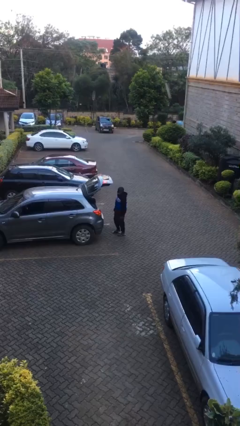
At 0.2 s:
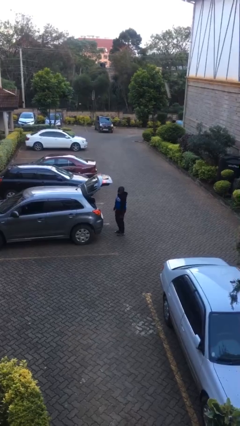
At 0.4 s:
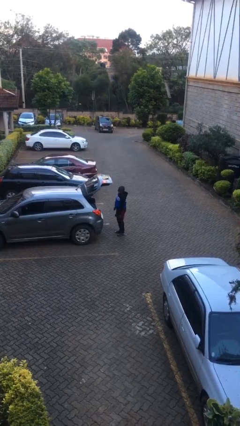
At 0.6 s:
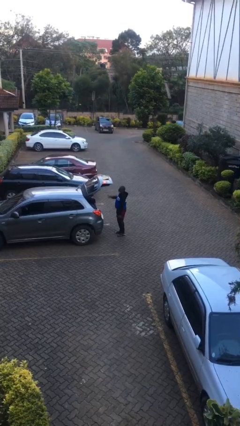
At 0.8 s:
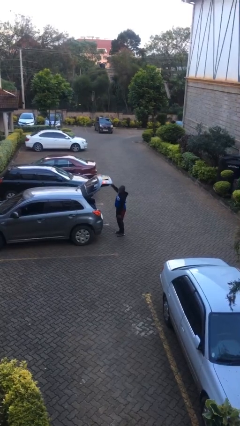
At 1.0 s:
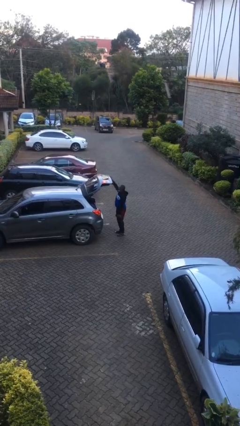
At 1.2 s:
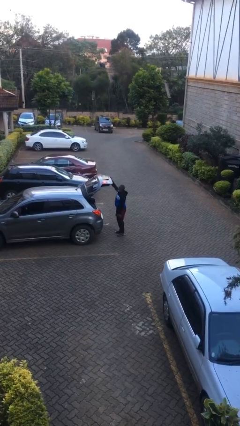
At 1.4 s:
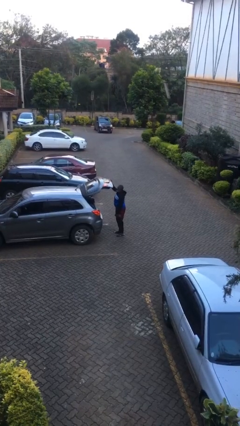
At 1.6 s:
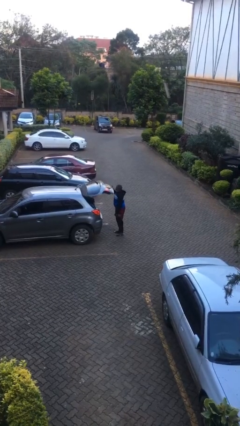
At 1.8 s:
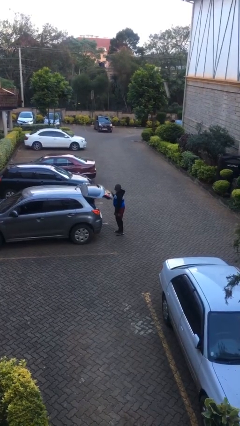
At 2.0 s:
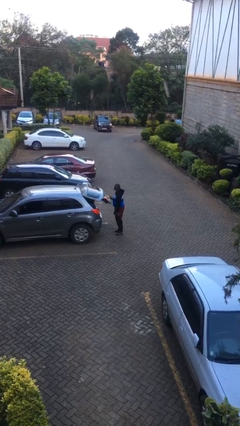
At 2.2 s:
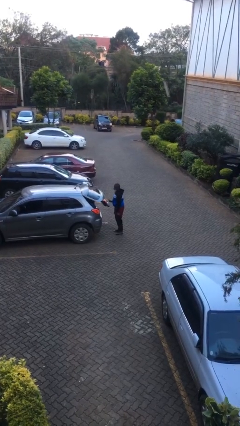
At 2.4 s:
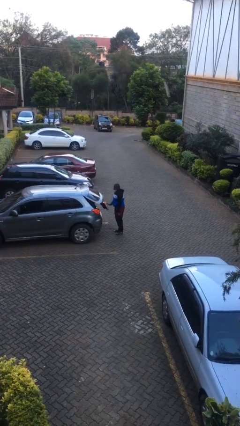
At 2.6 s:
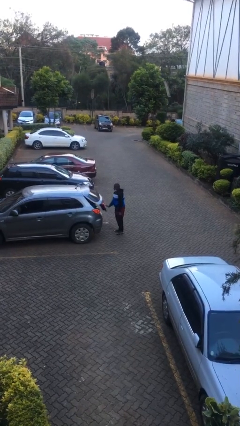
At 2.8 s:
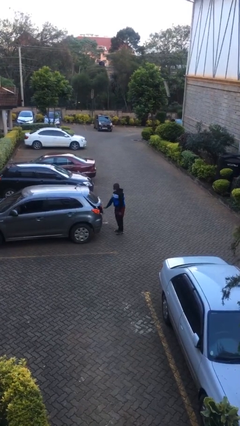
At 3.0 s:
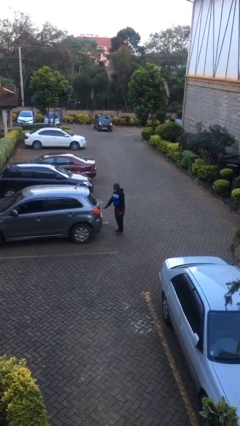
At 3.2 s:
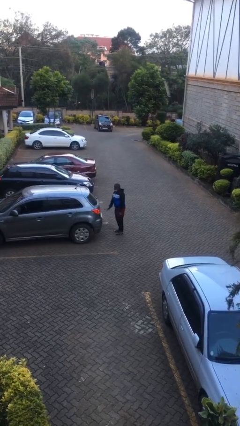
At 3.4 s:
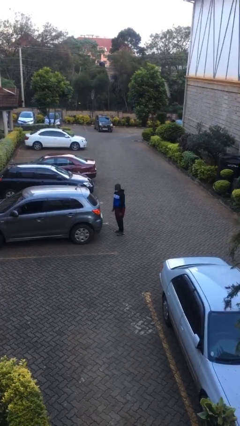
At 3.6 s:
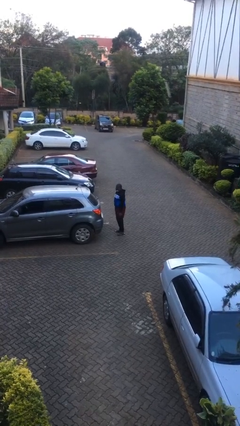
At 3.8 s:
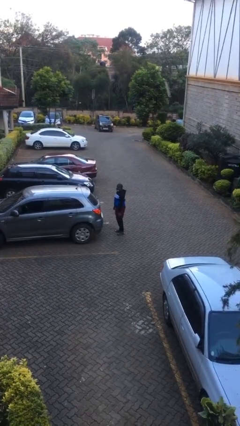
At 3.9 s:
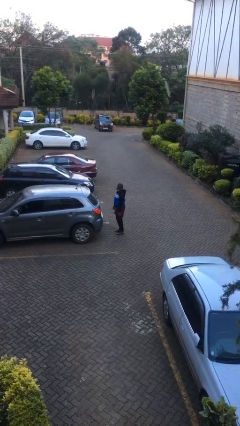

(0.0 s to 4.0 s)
person closes car trunk

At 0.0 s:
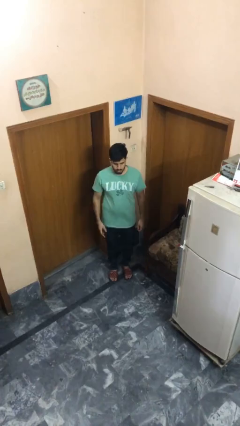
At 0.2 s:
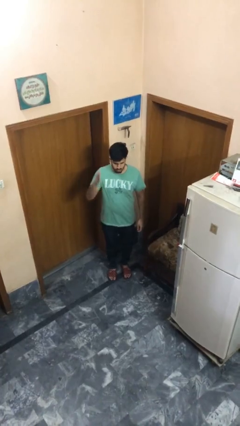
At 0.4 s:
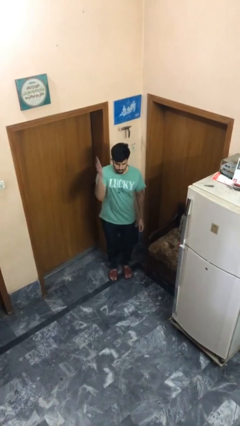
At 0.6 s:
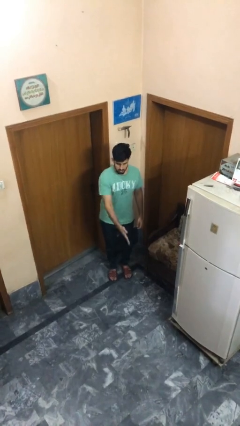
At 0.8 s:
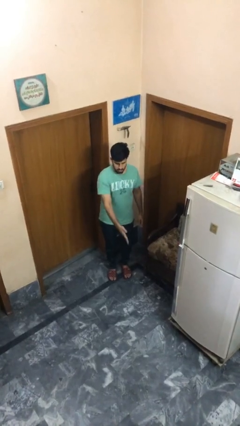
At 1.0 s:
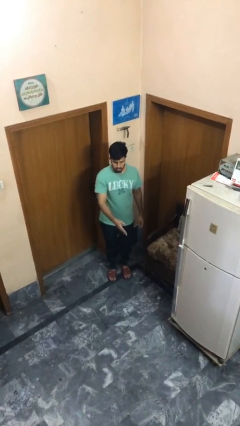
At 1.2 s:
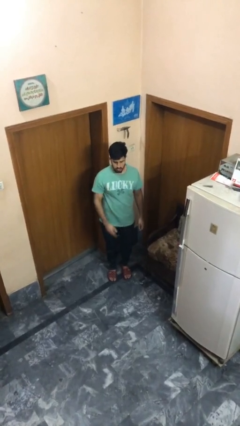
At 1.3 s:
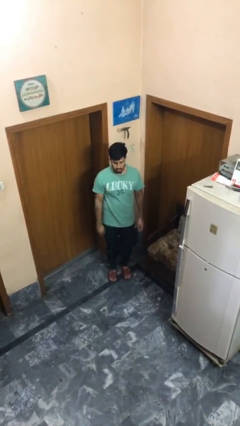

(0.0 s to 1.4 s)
person karate chop

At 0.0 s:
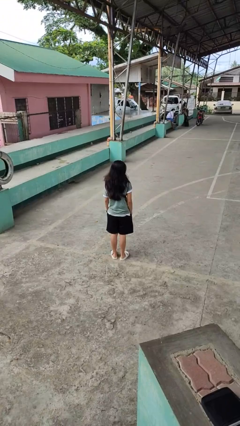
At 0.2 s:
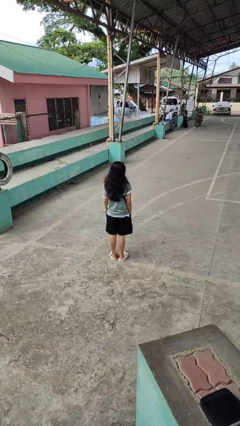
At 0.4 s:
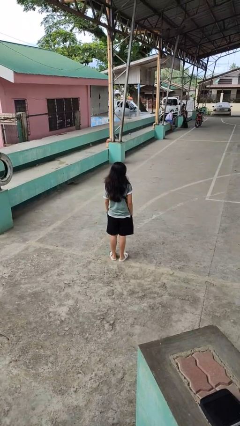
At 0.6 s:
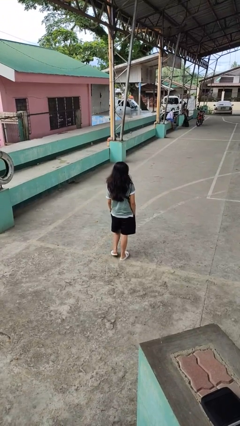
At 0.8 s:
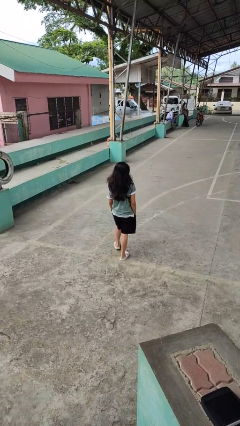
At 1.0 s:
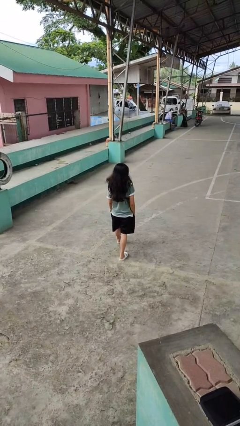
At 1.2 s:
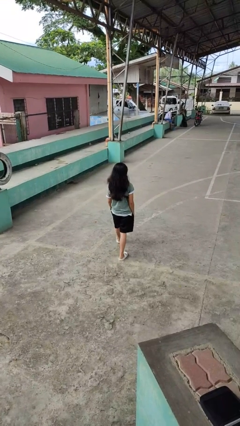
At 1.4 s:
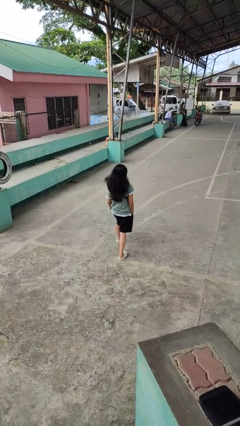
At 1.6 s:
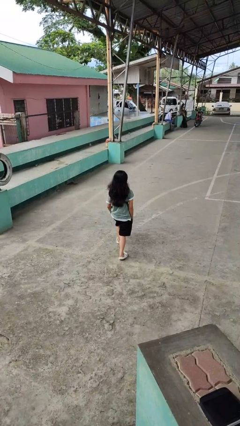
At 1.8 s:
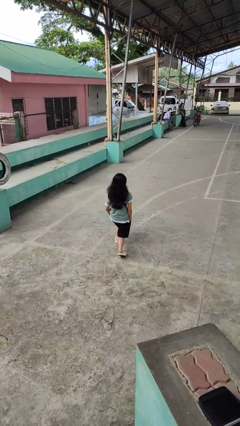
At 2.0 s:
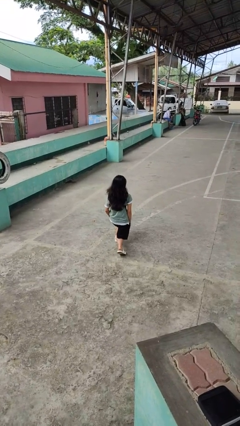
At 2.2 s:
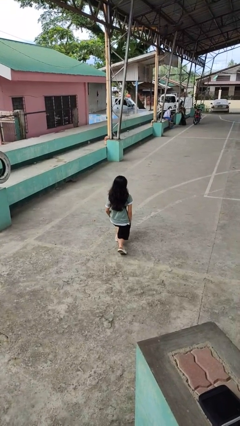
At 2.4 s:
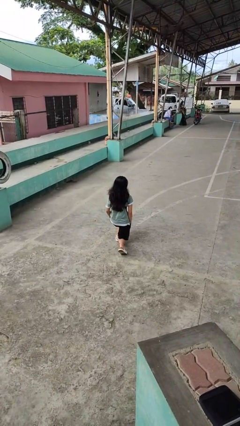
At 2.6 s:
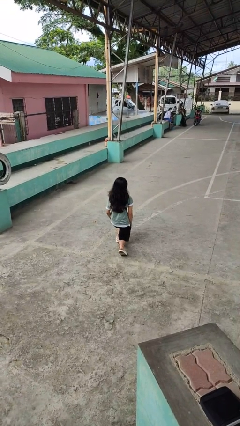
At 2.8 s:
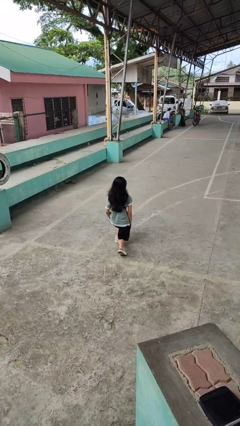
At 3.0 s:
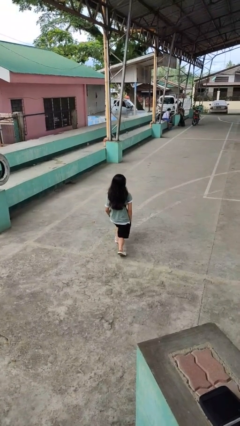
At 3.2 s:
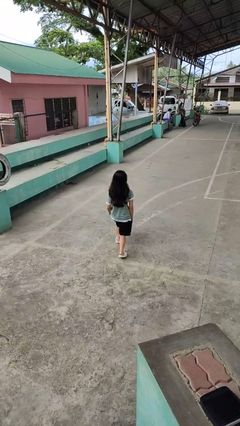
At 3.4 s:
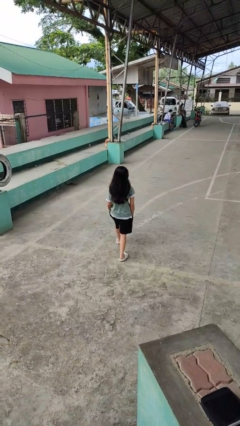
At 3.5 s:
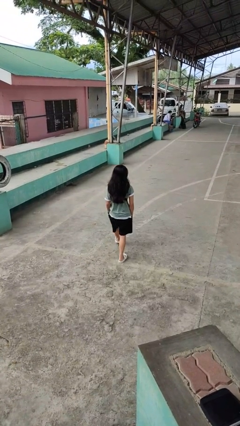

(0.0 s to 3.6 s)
person exercises with lunges

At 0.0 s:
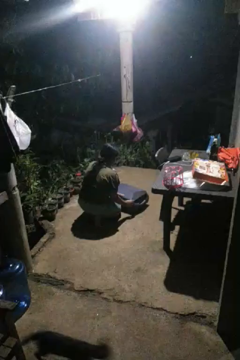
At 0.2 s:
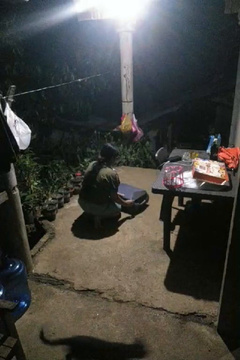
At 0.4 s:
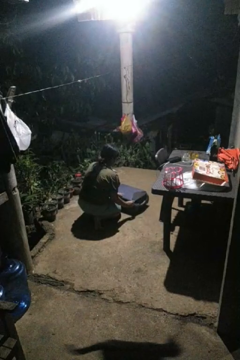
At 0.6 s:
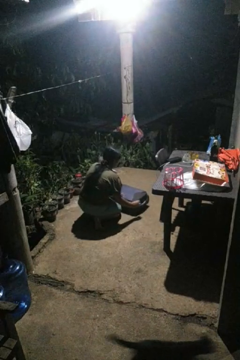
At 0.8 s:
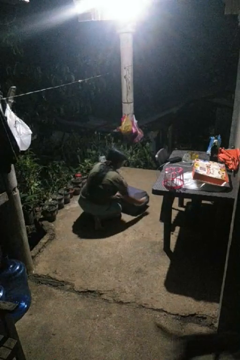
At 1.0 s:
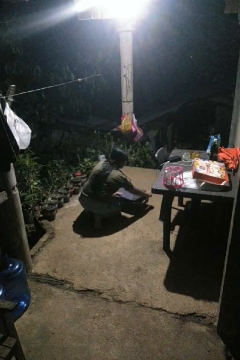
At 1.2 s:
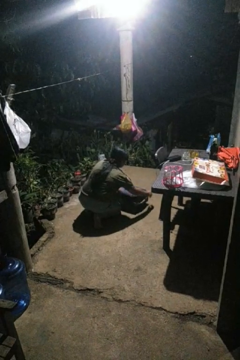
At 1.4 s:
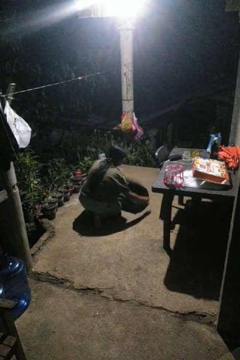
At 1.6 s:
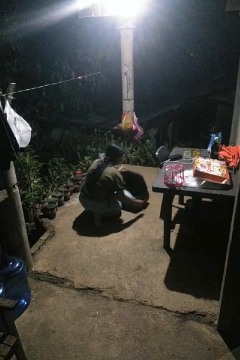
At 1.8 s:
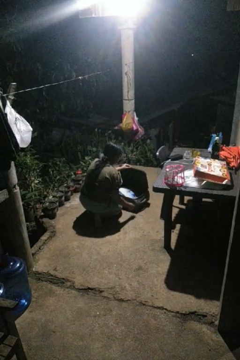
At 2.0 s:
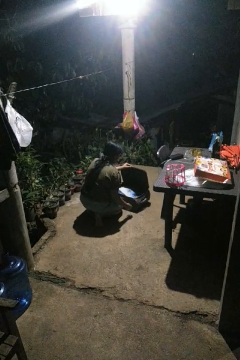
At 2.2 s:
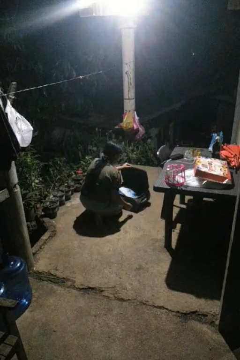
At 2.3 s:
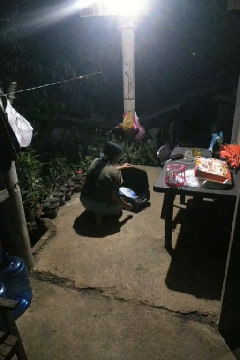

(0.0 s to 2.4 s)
person opens suitcase

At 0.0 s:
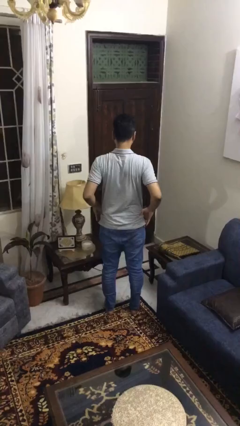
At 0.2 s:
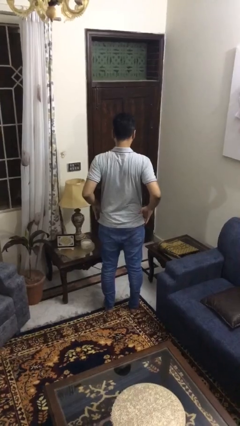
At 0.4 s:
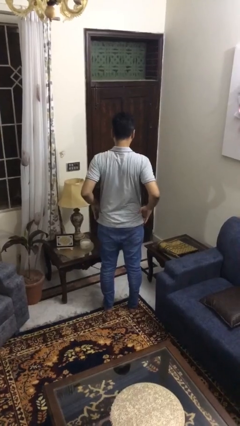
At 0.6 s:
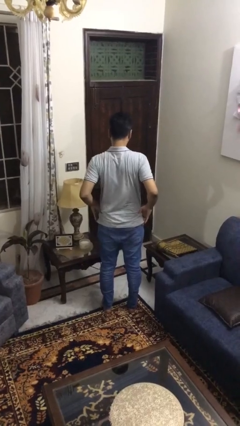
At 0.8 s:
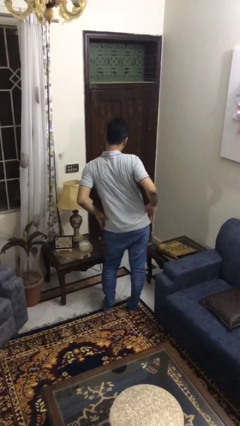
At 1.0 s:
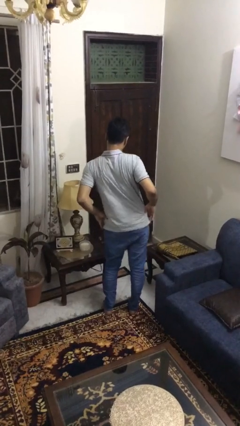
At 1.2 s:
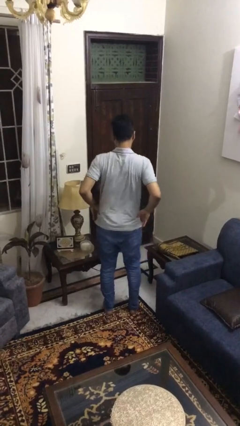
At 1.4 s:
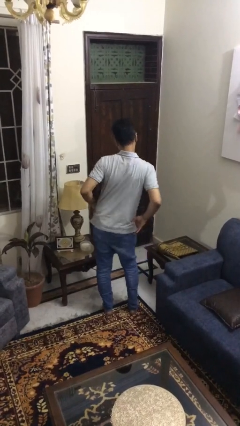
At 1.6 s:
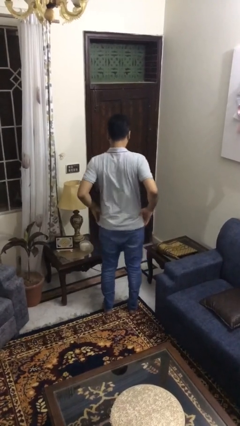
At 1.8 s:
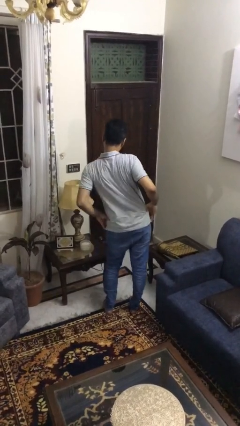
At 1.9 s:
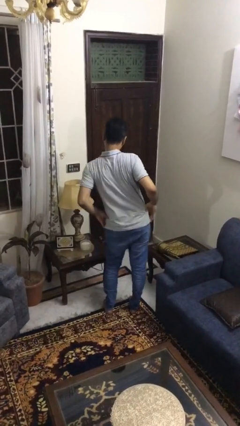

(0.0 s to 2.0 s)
person wiggles hips

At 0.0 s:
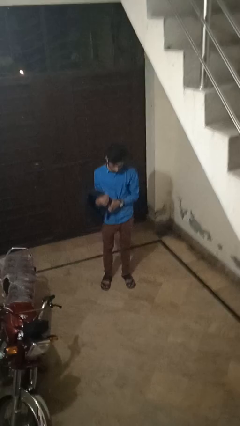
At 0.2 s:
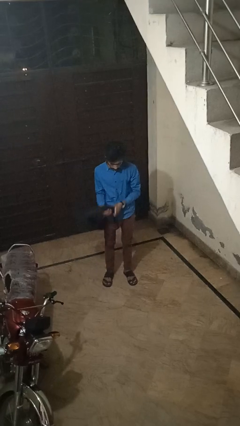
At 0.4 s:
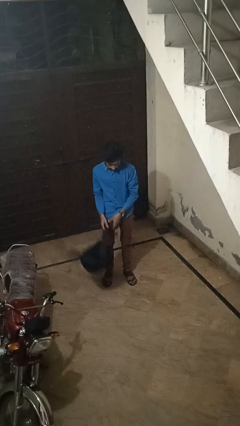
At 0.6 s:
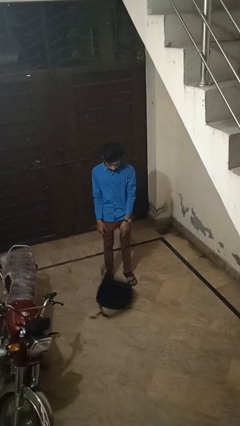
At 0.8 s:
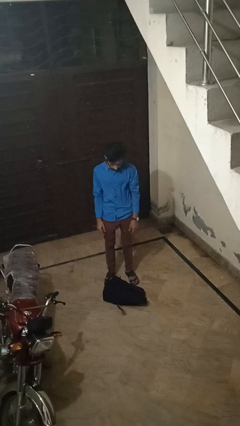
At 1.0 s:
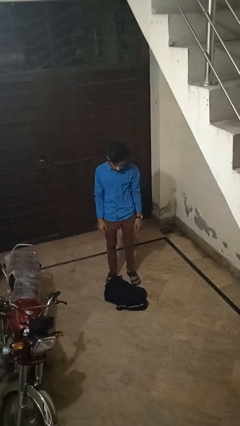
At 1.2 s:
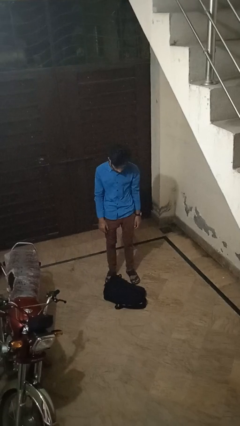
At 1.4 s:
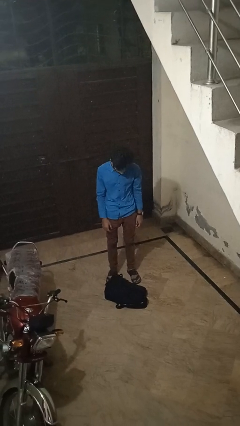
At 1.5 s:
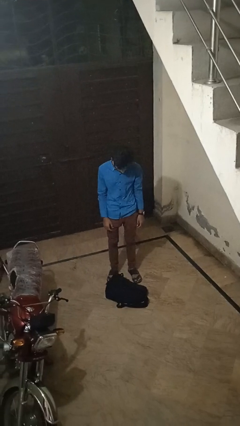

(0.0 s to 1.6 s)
person drops object

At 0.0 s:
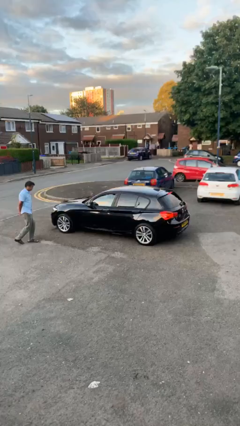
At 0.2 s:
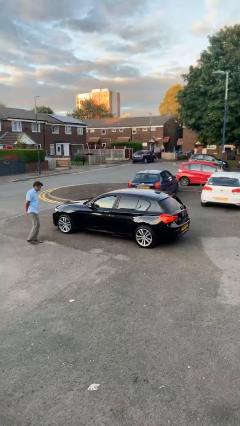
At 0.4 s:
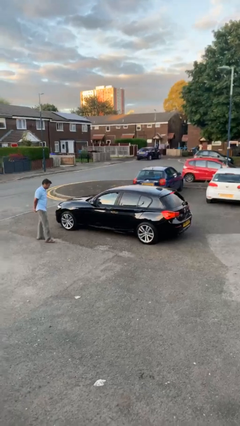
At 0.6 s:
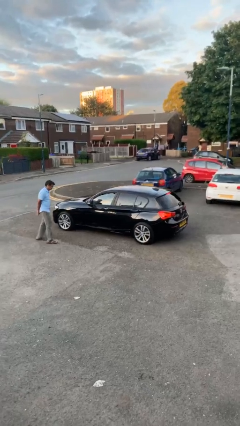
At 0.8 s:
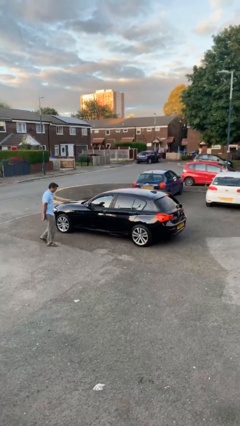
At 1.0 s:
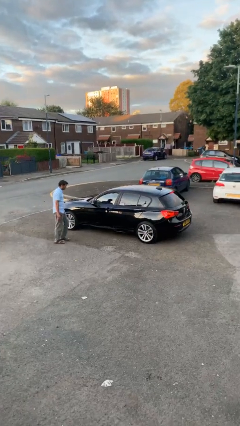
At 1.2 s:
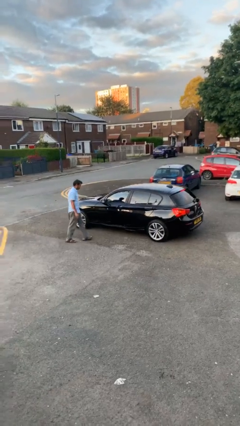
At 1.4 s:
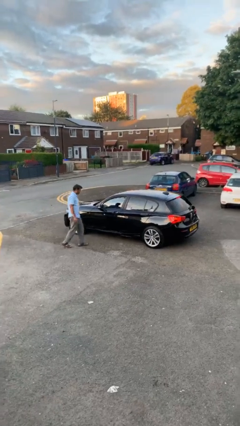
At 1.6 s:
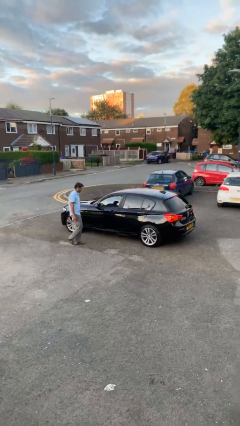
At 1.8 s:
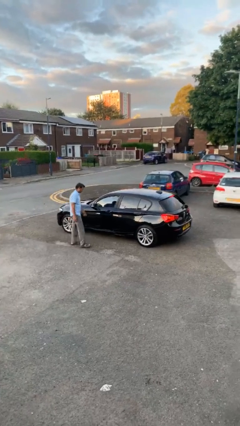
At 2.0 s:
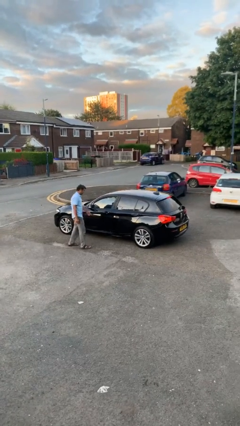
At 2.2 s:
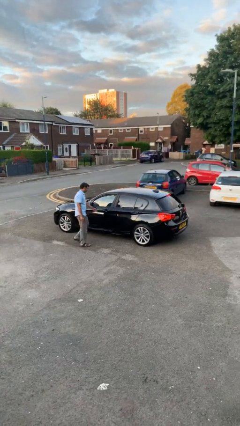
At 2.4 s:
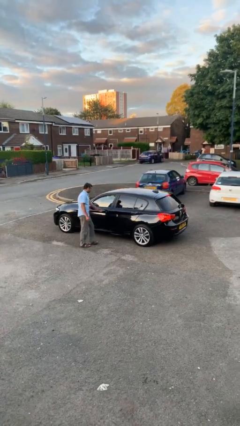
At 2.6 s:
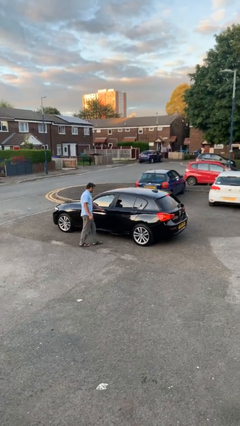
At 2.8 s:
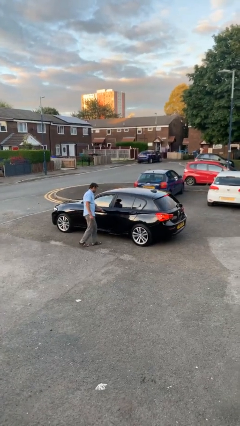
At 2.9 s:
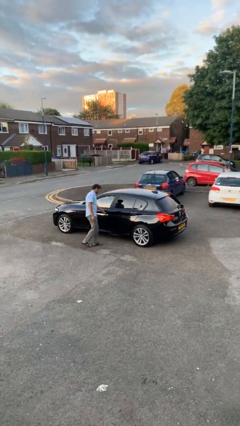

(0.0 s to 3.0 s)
car picks up person
